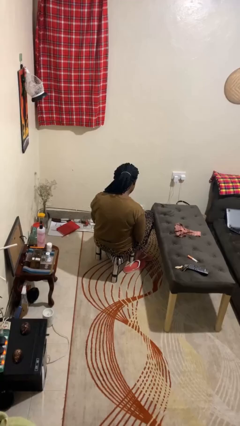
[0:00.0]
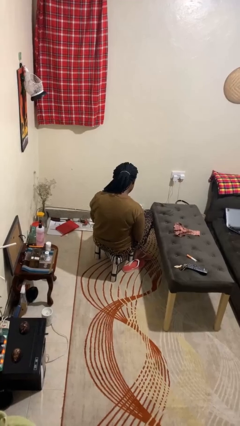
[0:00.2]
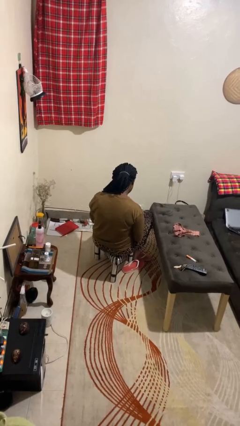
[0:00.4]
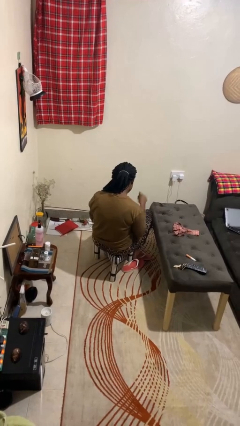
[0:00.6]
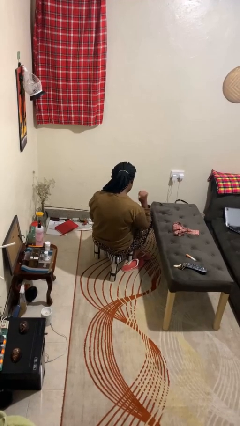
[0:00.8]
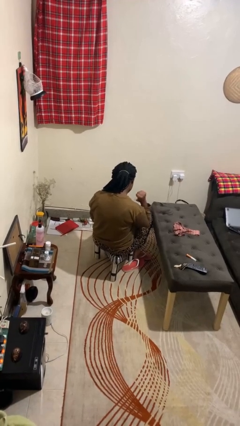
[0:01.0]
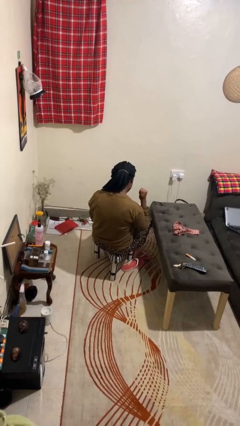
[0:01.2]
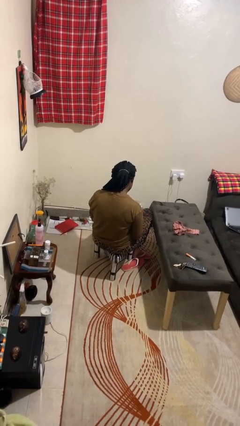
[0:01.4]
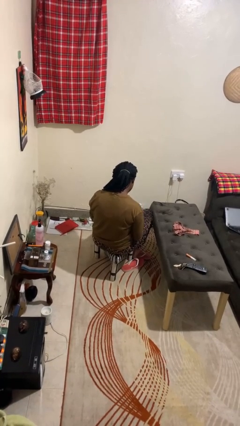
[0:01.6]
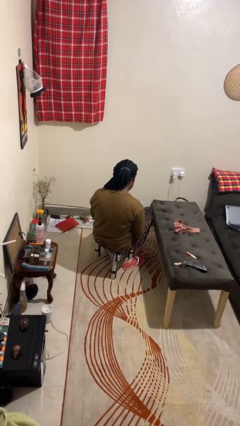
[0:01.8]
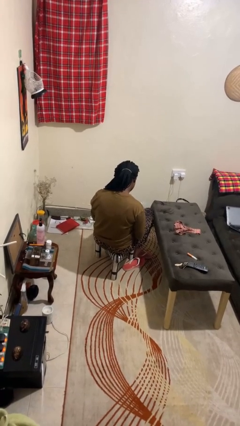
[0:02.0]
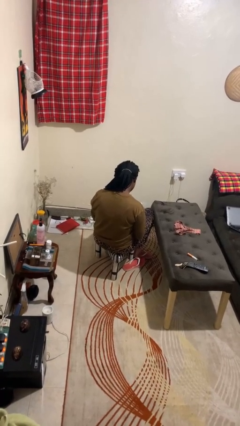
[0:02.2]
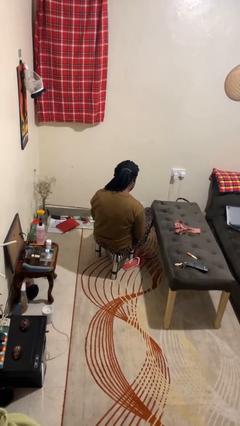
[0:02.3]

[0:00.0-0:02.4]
person gestures behind me

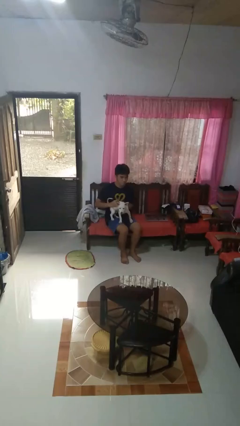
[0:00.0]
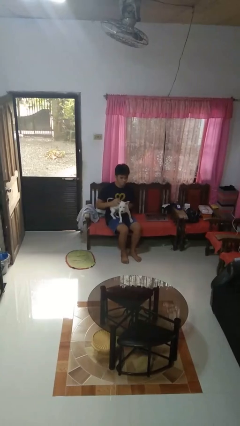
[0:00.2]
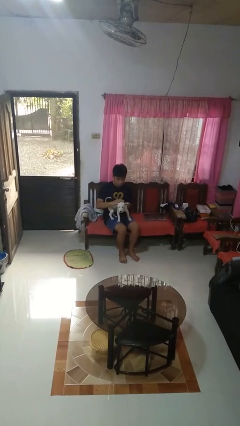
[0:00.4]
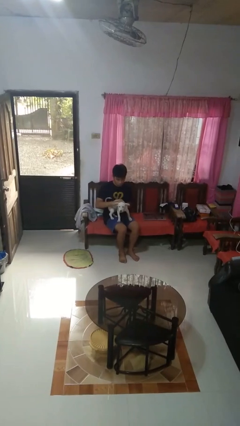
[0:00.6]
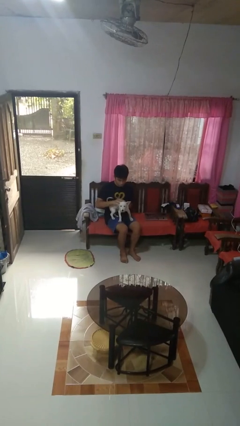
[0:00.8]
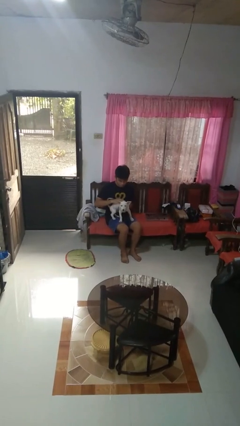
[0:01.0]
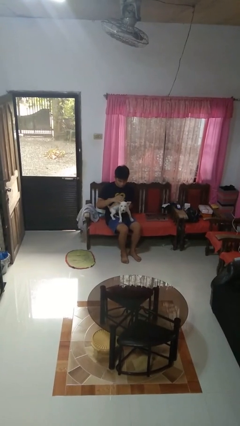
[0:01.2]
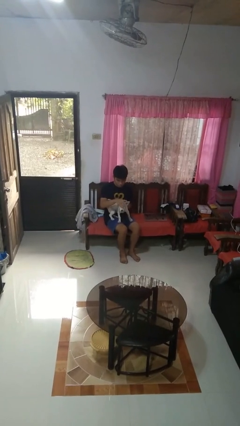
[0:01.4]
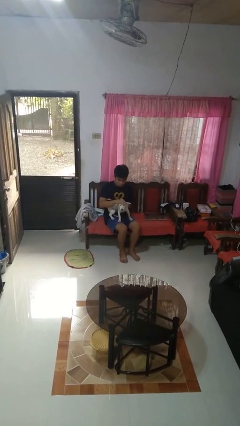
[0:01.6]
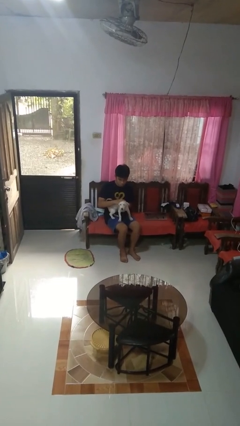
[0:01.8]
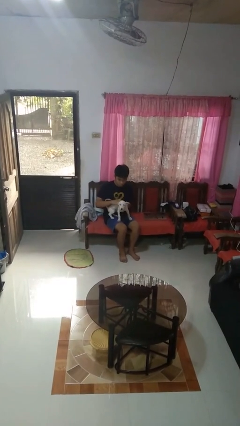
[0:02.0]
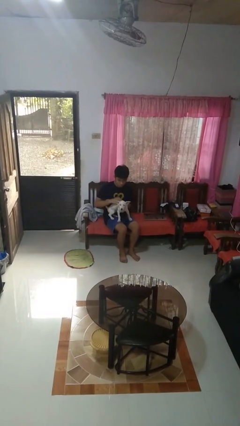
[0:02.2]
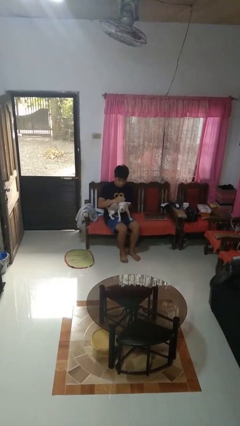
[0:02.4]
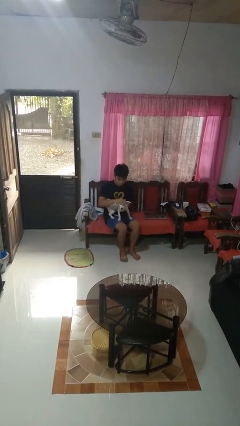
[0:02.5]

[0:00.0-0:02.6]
person pets dog

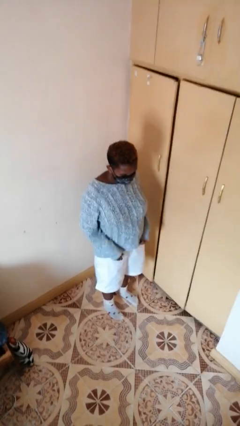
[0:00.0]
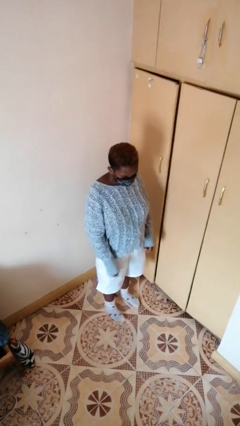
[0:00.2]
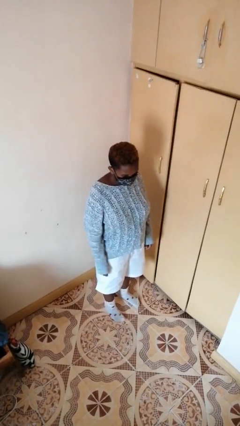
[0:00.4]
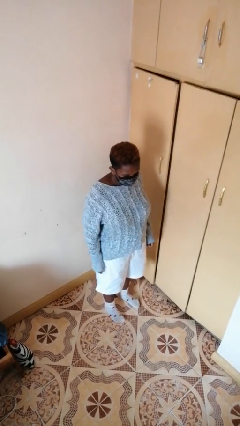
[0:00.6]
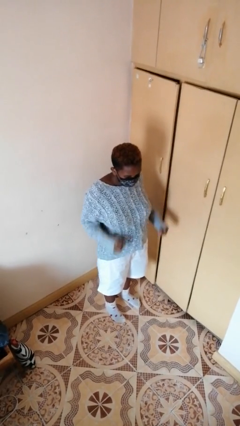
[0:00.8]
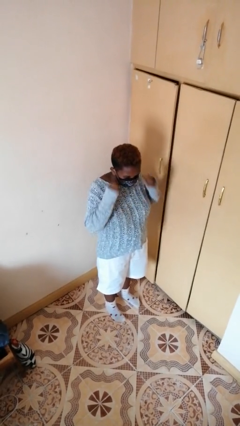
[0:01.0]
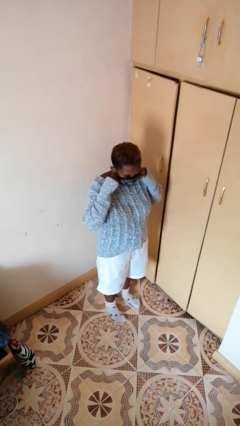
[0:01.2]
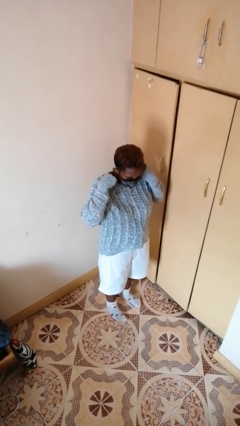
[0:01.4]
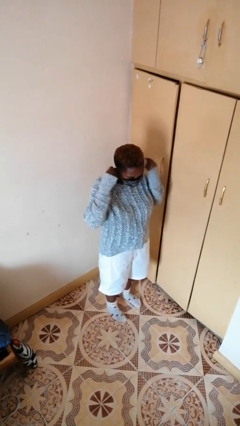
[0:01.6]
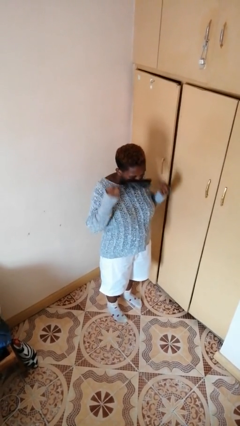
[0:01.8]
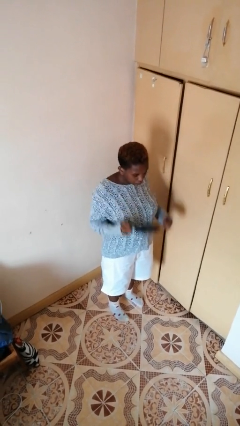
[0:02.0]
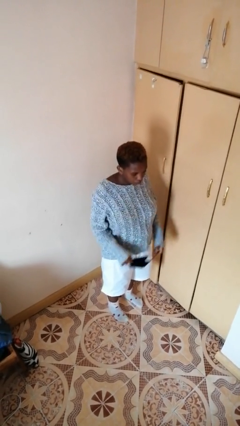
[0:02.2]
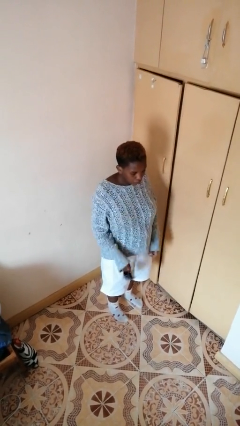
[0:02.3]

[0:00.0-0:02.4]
person takes off facemask

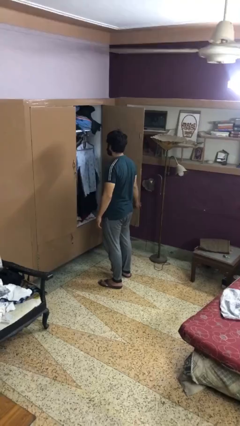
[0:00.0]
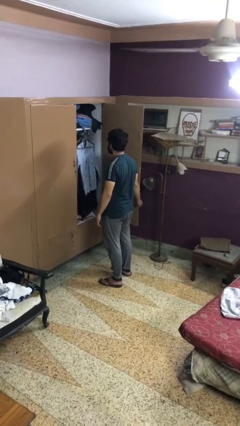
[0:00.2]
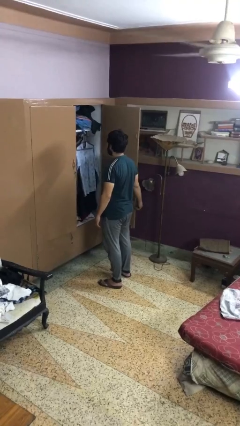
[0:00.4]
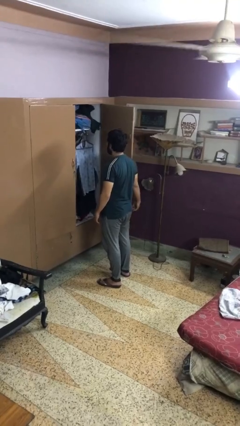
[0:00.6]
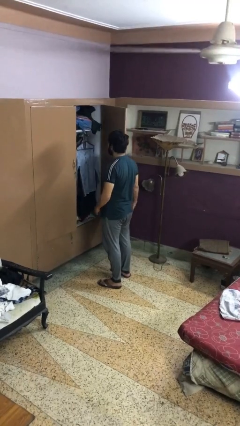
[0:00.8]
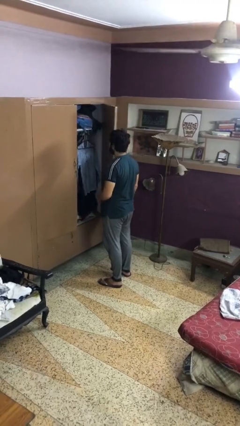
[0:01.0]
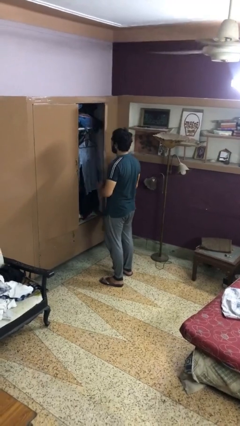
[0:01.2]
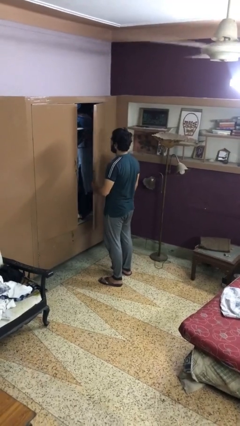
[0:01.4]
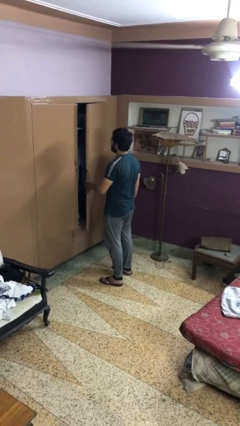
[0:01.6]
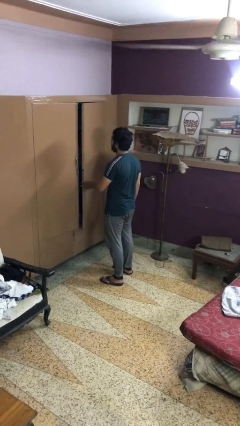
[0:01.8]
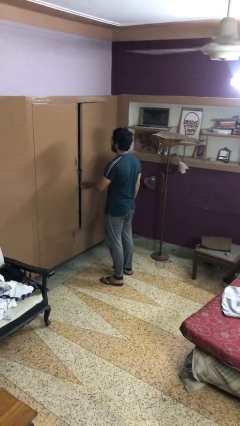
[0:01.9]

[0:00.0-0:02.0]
person closes closet door

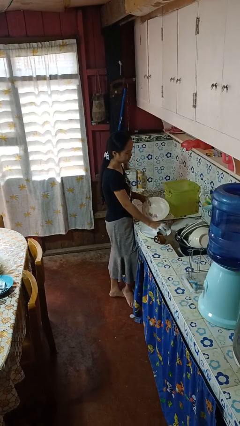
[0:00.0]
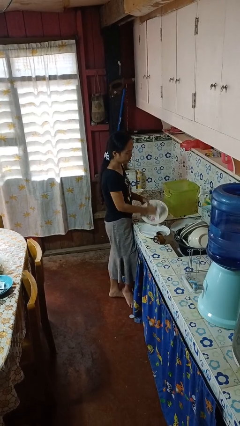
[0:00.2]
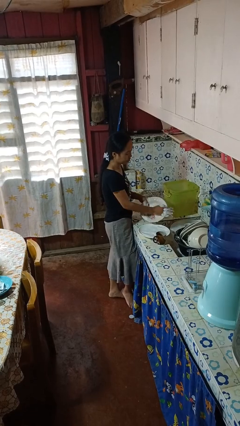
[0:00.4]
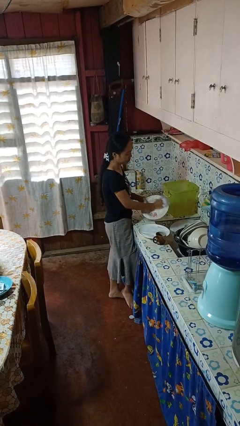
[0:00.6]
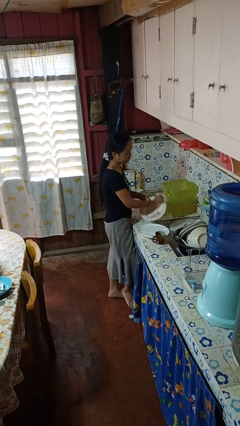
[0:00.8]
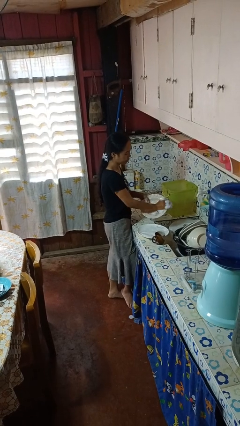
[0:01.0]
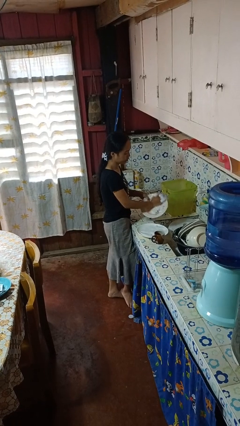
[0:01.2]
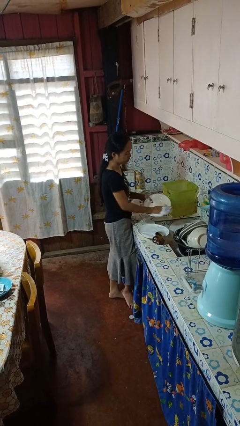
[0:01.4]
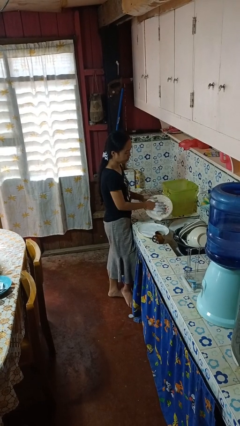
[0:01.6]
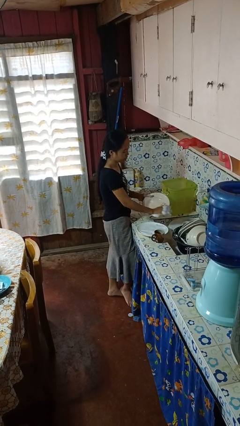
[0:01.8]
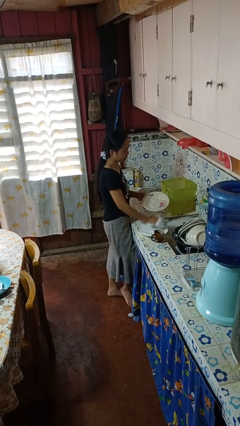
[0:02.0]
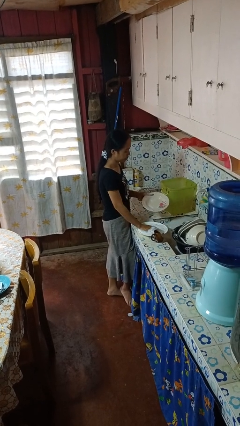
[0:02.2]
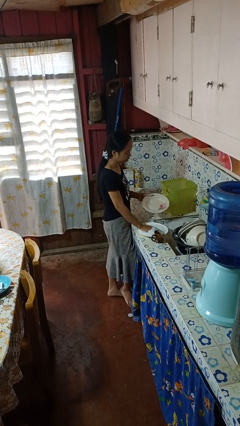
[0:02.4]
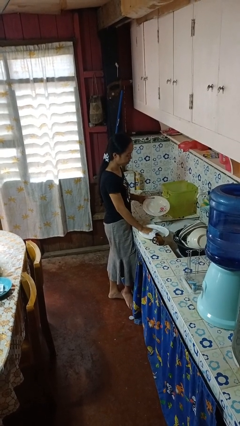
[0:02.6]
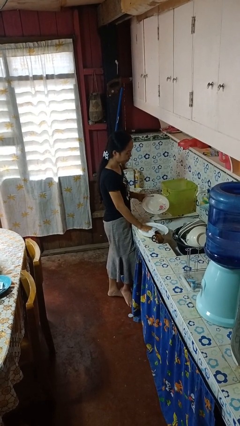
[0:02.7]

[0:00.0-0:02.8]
person washes dish

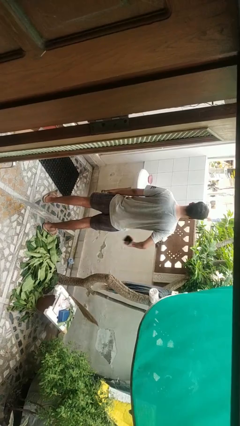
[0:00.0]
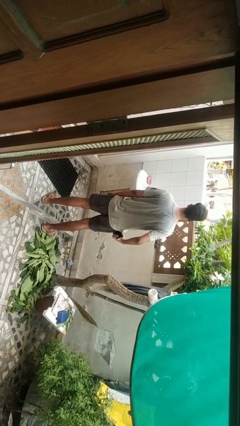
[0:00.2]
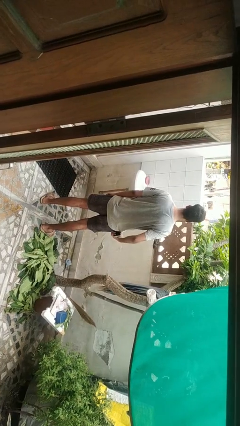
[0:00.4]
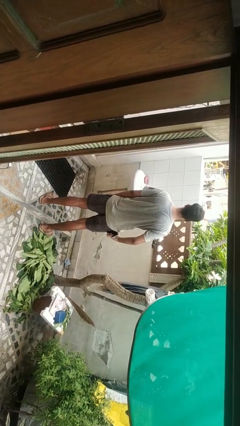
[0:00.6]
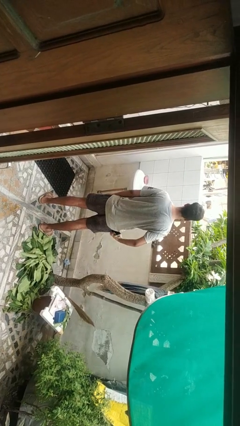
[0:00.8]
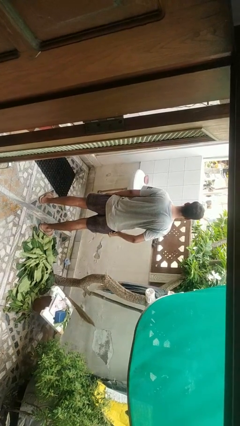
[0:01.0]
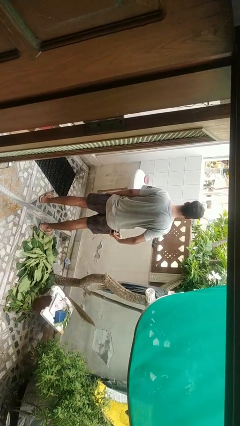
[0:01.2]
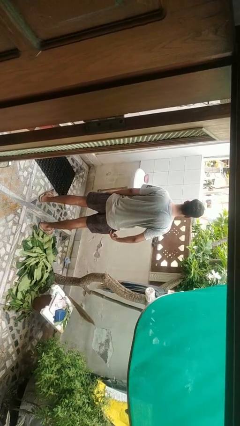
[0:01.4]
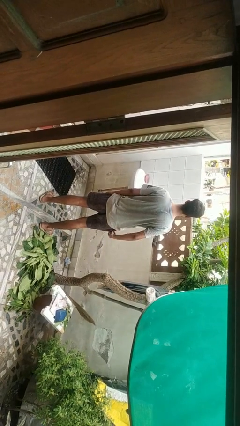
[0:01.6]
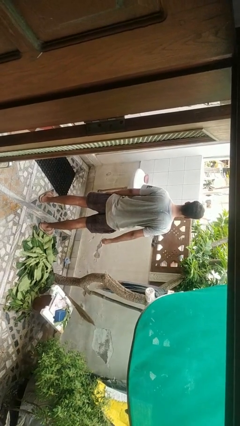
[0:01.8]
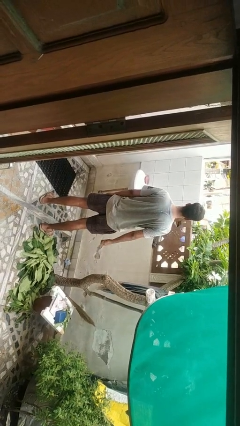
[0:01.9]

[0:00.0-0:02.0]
person puts phone into pocket

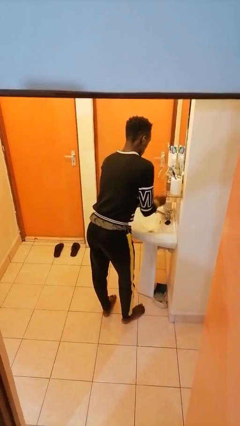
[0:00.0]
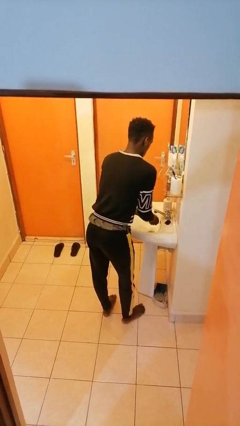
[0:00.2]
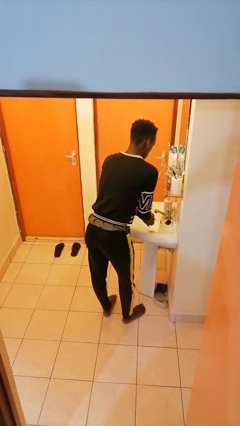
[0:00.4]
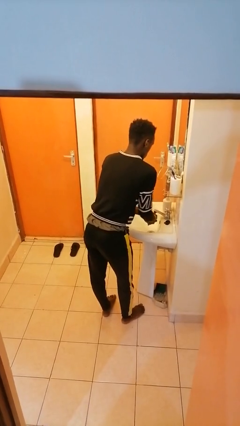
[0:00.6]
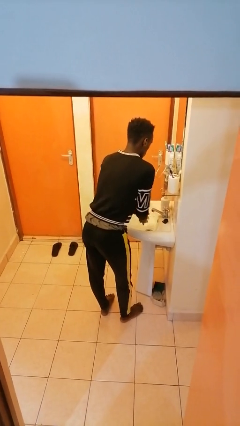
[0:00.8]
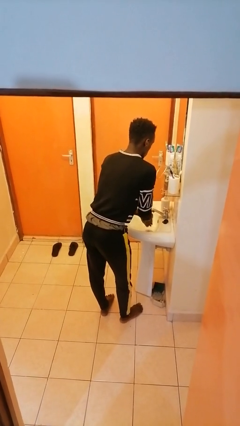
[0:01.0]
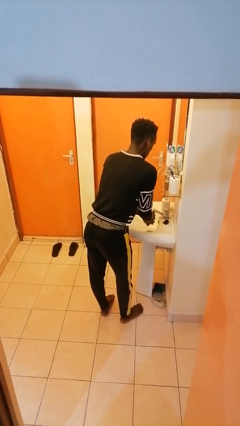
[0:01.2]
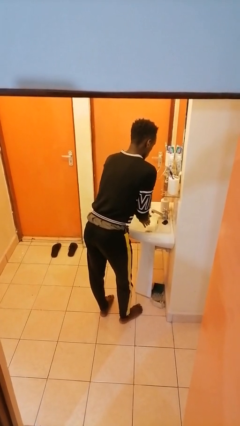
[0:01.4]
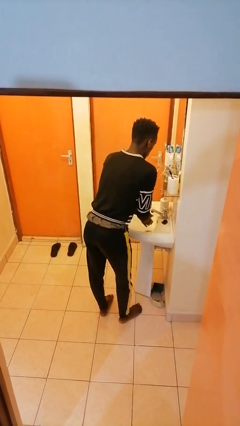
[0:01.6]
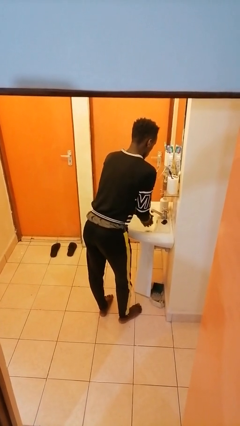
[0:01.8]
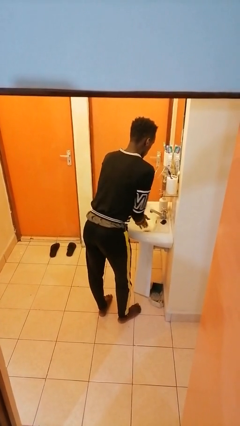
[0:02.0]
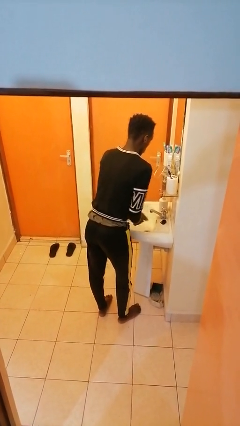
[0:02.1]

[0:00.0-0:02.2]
person washes hands

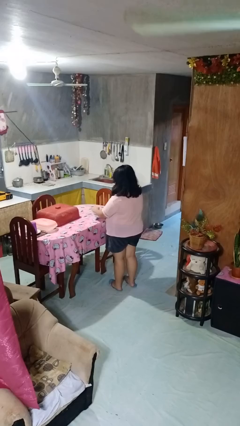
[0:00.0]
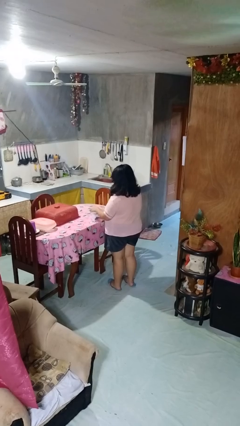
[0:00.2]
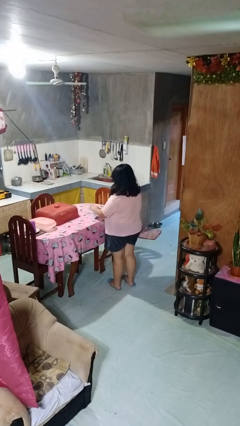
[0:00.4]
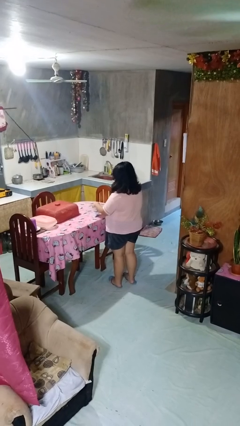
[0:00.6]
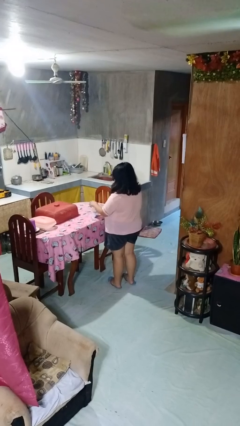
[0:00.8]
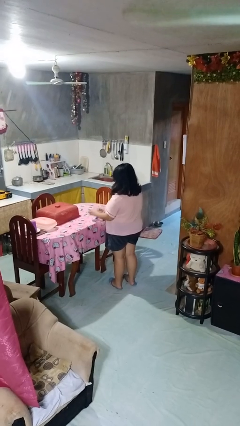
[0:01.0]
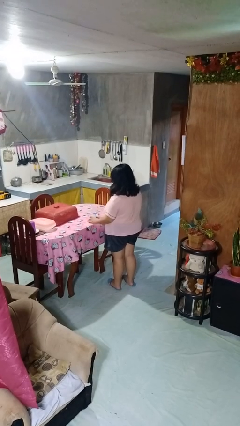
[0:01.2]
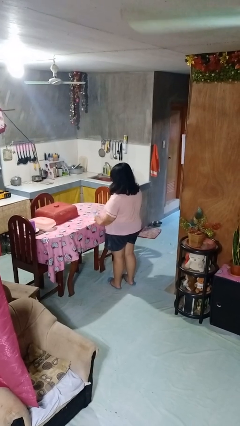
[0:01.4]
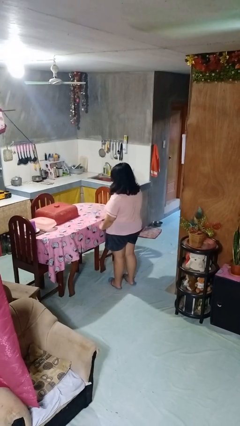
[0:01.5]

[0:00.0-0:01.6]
person opens jar